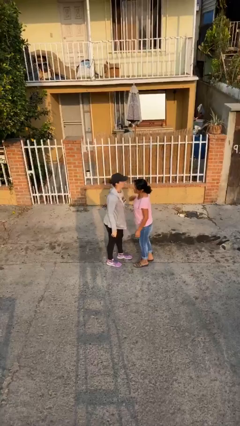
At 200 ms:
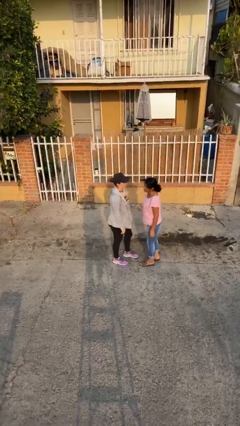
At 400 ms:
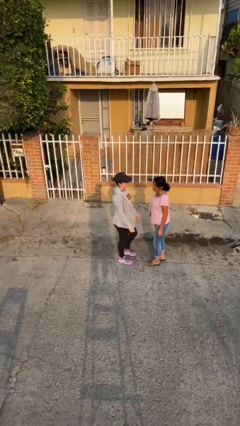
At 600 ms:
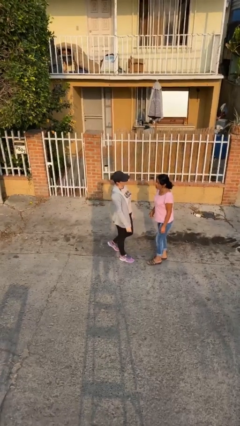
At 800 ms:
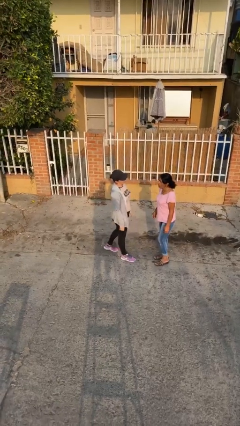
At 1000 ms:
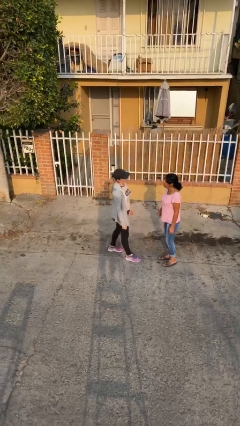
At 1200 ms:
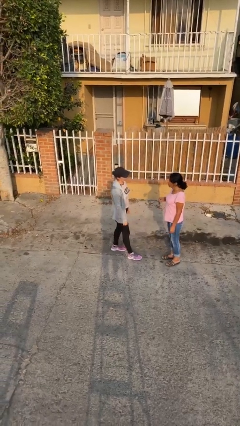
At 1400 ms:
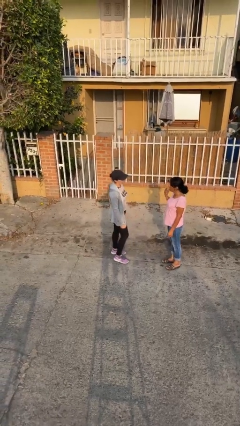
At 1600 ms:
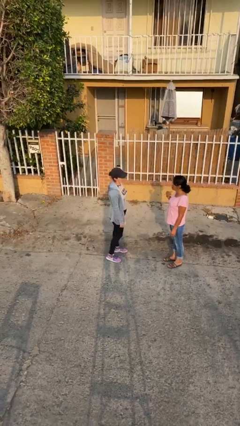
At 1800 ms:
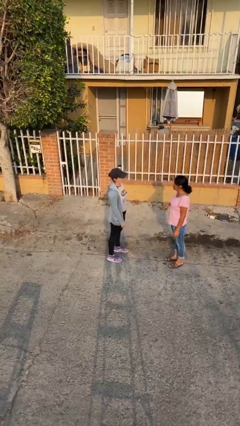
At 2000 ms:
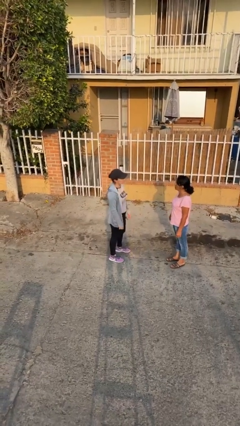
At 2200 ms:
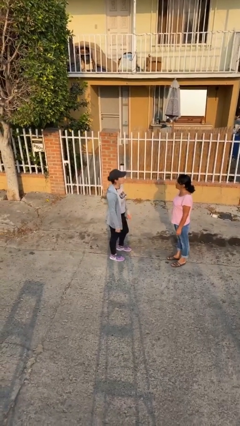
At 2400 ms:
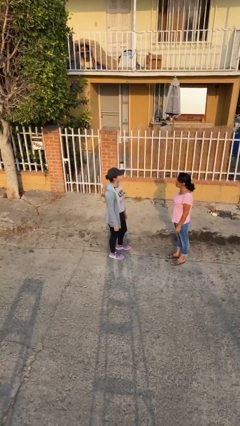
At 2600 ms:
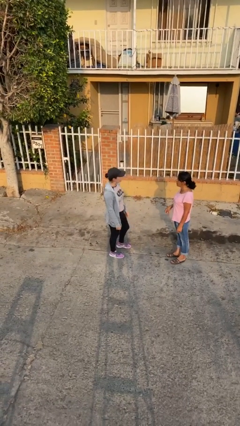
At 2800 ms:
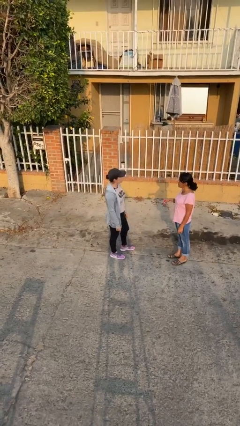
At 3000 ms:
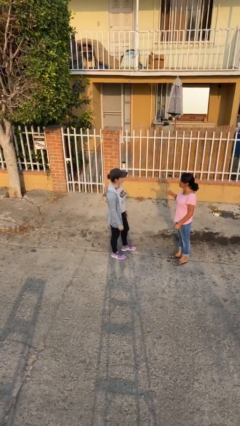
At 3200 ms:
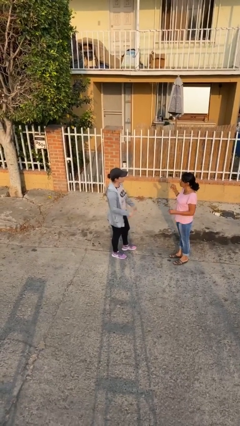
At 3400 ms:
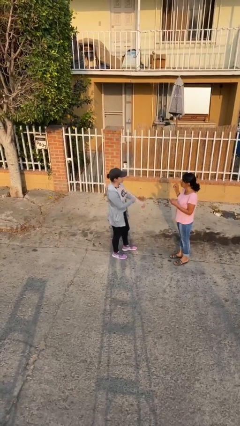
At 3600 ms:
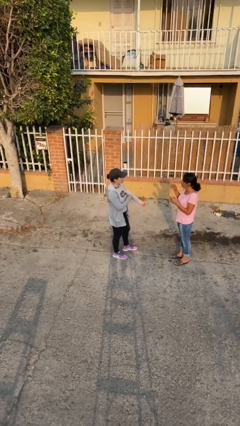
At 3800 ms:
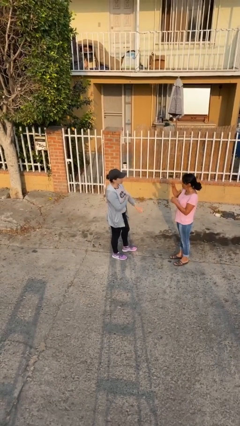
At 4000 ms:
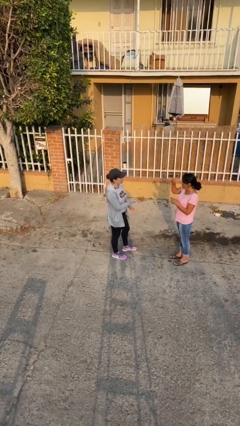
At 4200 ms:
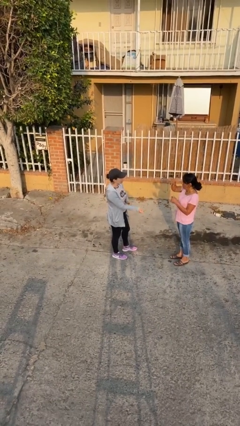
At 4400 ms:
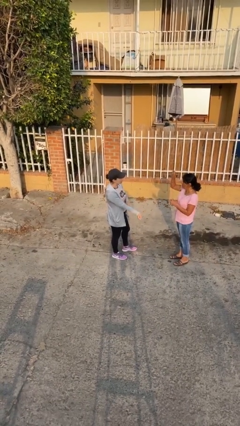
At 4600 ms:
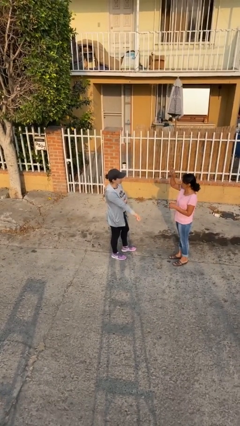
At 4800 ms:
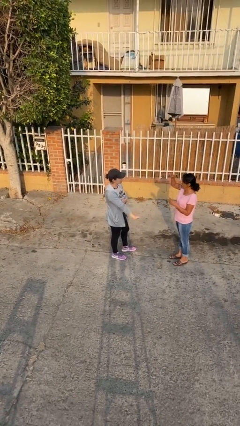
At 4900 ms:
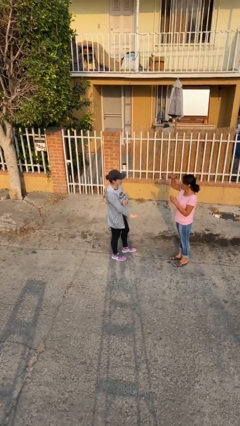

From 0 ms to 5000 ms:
person talks to person

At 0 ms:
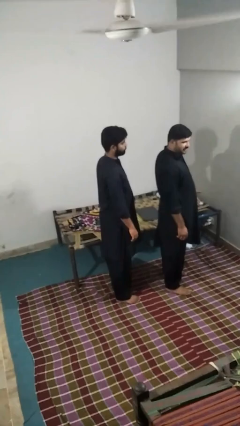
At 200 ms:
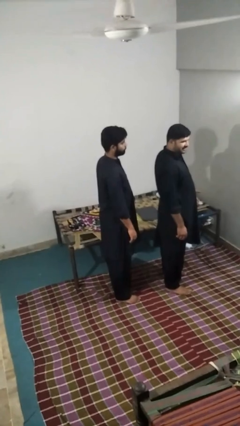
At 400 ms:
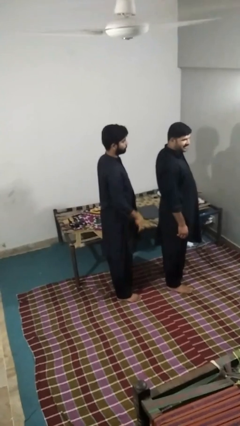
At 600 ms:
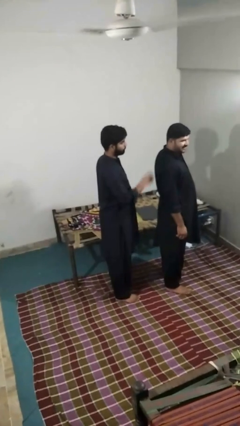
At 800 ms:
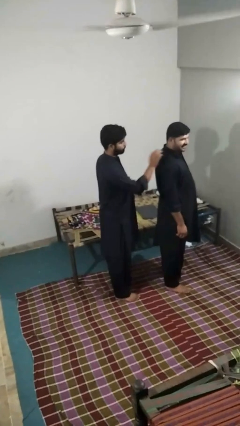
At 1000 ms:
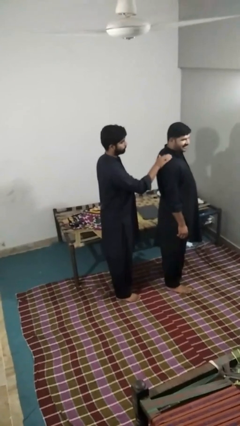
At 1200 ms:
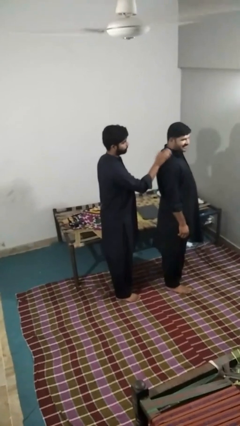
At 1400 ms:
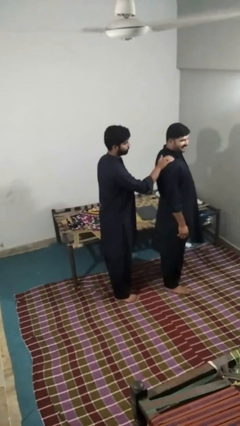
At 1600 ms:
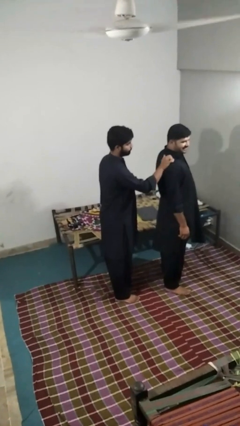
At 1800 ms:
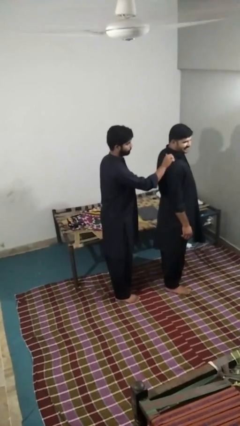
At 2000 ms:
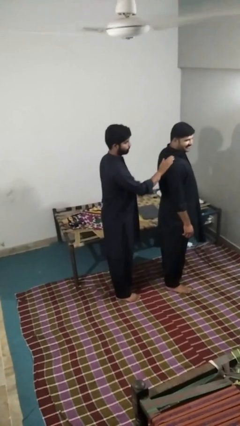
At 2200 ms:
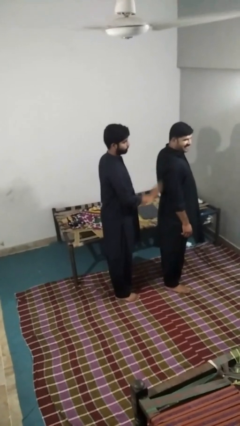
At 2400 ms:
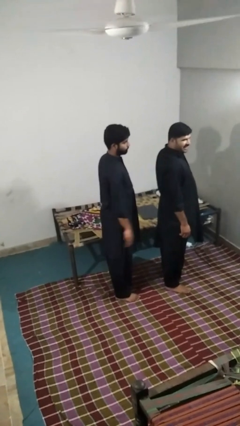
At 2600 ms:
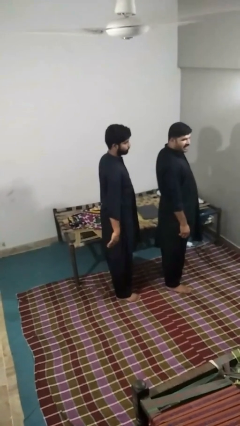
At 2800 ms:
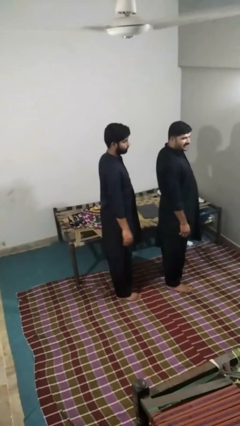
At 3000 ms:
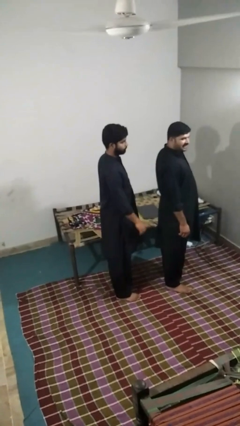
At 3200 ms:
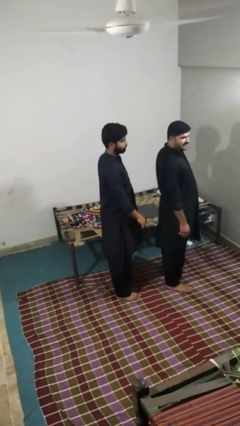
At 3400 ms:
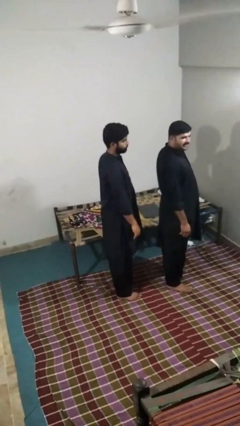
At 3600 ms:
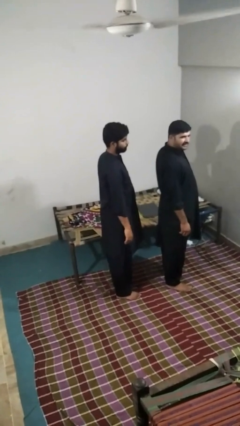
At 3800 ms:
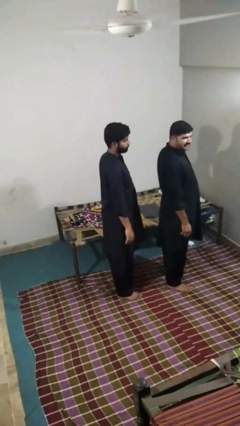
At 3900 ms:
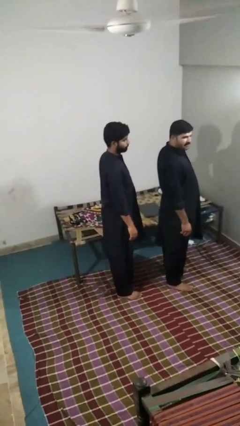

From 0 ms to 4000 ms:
person touches back of person

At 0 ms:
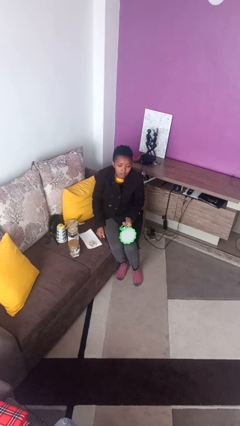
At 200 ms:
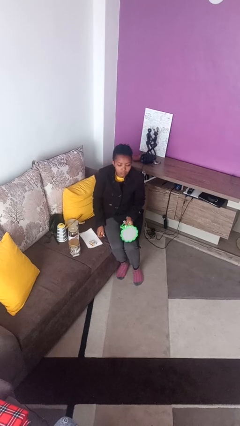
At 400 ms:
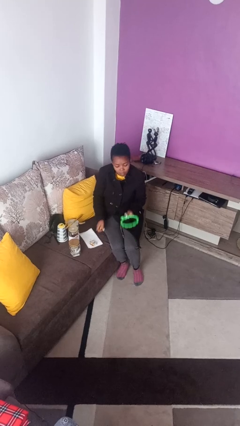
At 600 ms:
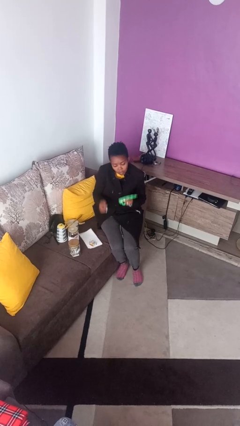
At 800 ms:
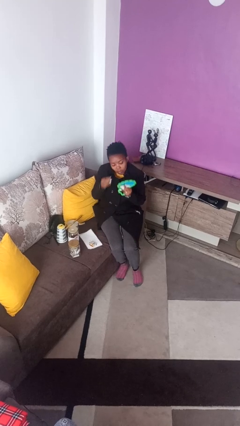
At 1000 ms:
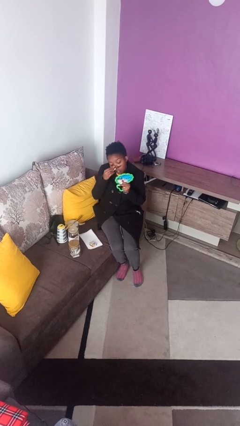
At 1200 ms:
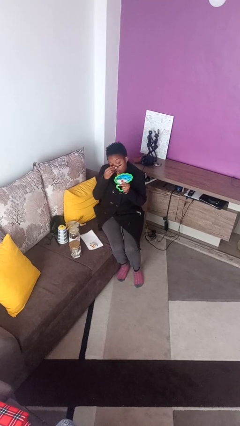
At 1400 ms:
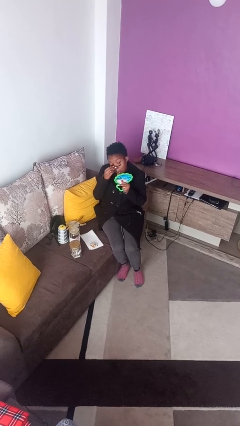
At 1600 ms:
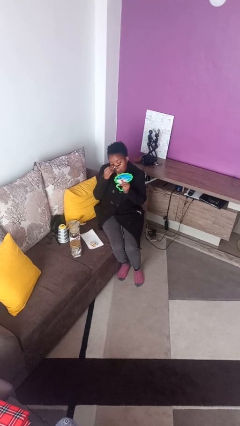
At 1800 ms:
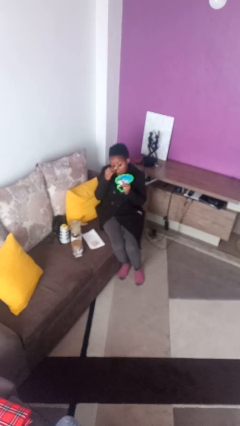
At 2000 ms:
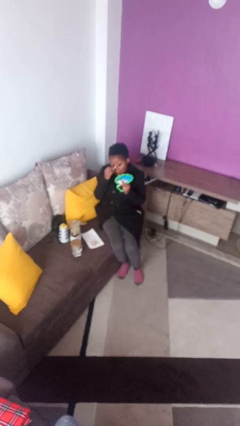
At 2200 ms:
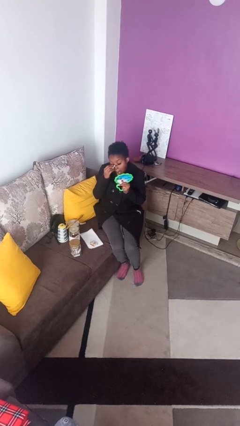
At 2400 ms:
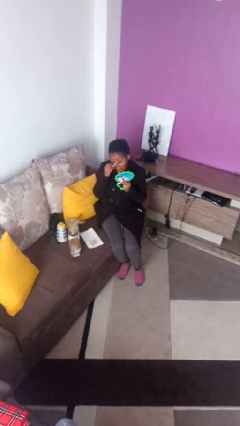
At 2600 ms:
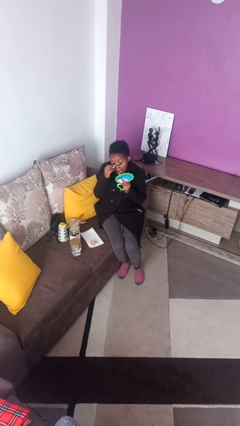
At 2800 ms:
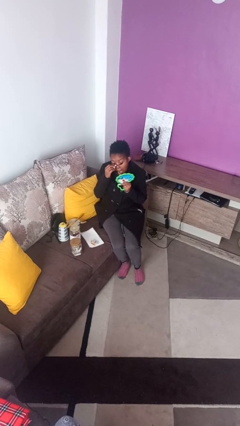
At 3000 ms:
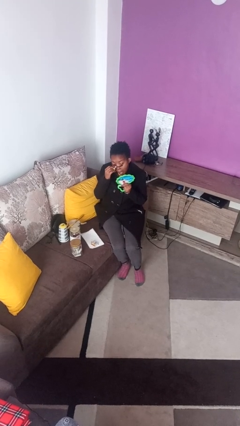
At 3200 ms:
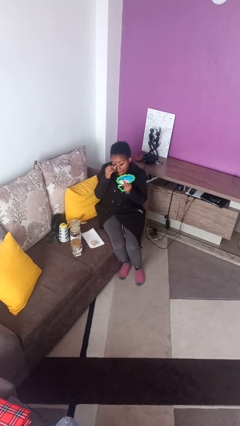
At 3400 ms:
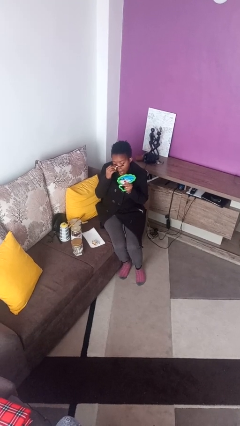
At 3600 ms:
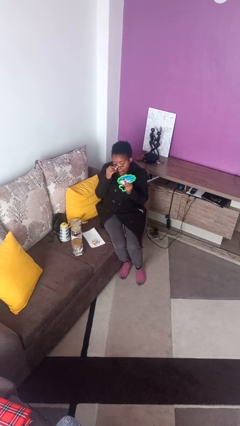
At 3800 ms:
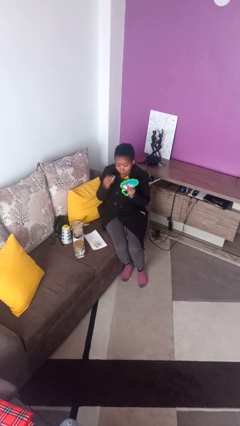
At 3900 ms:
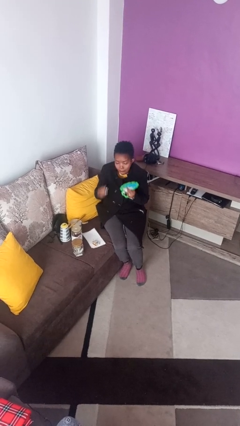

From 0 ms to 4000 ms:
person applies eye makeup

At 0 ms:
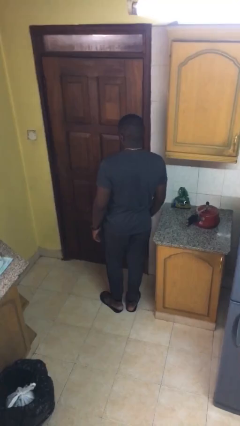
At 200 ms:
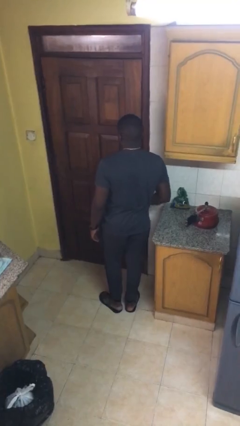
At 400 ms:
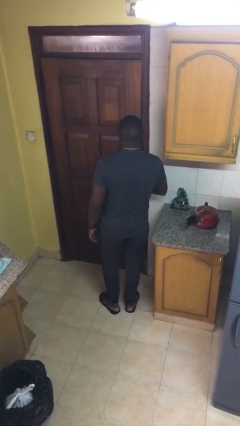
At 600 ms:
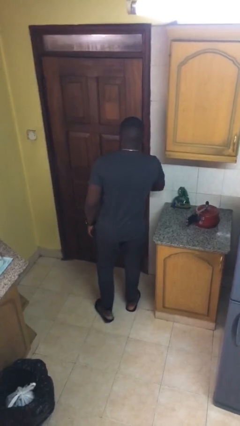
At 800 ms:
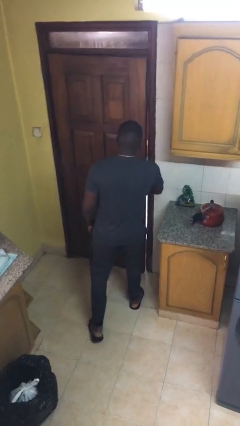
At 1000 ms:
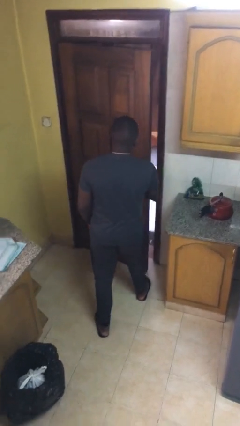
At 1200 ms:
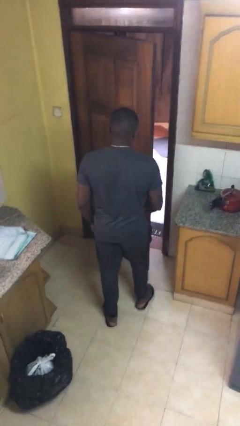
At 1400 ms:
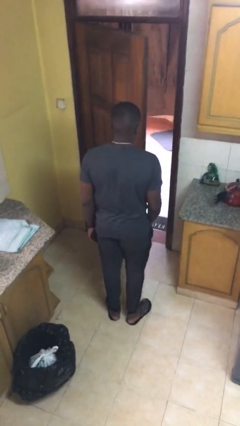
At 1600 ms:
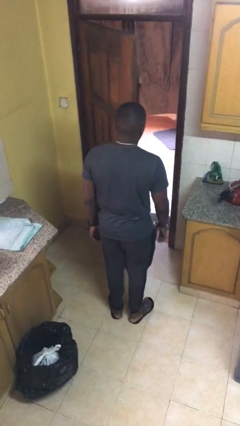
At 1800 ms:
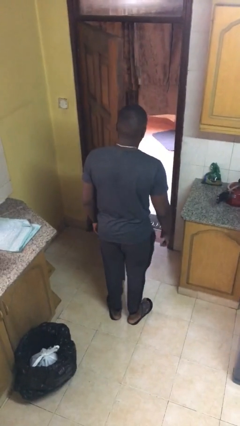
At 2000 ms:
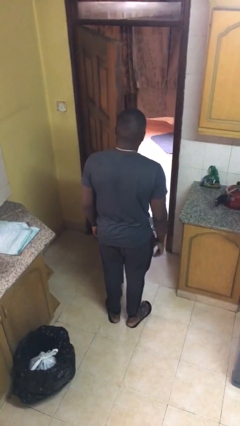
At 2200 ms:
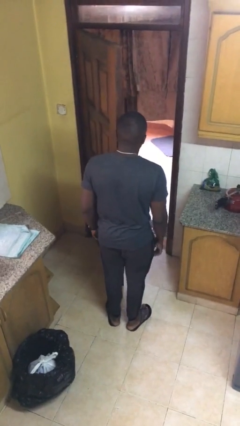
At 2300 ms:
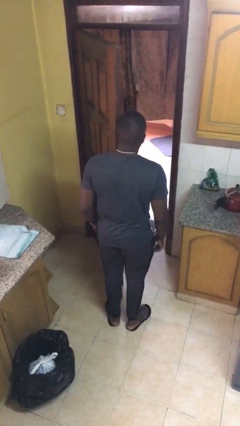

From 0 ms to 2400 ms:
person opens facility door

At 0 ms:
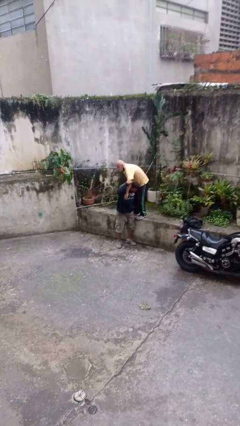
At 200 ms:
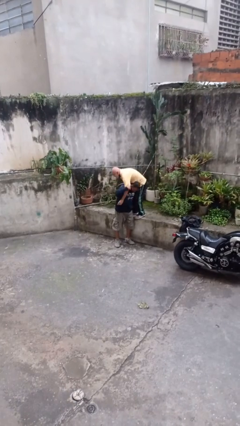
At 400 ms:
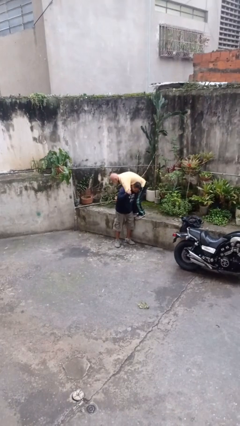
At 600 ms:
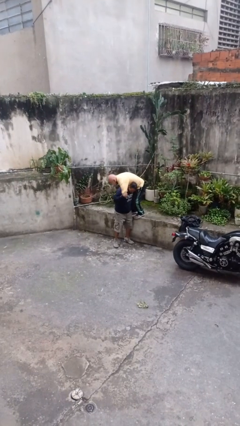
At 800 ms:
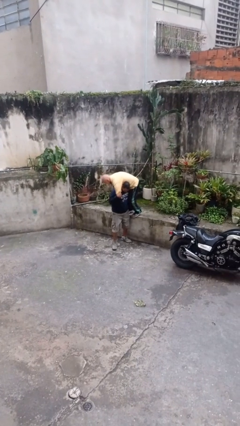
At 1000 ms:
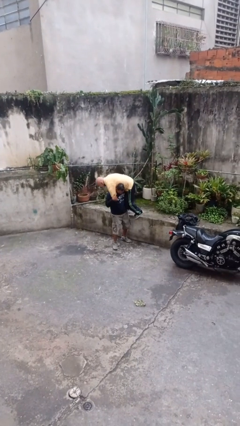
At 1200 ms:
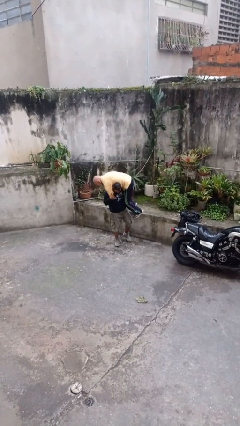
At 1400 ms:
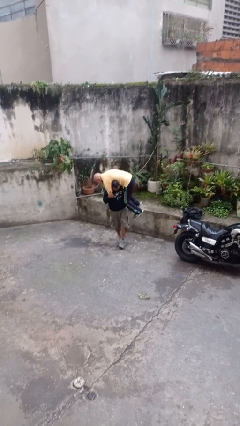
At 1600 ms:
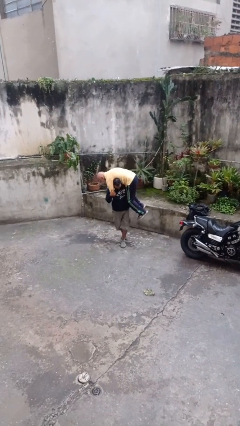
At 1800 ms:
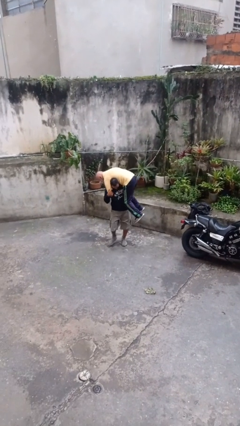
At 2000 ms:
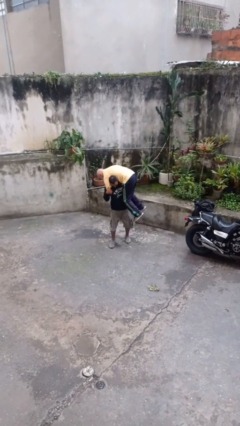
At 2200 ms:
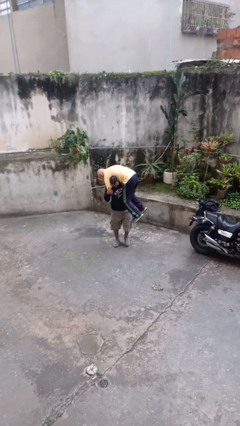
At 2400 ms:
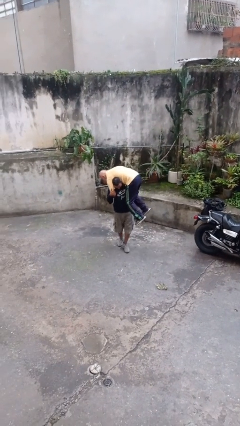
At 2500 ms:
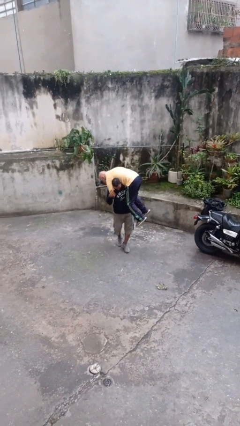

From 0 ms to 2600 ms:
person carries person over shoulder
